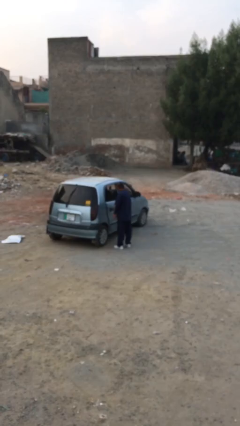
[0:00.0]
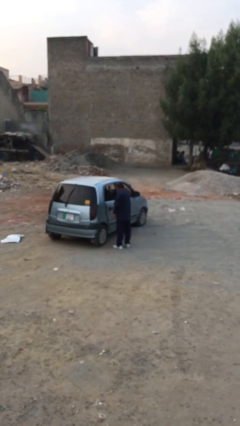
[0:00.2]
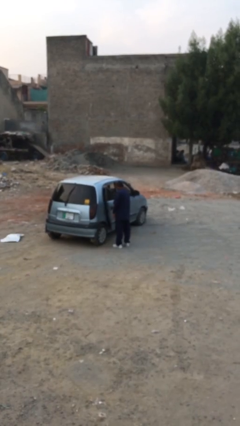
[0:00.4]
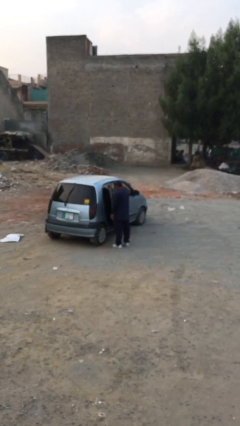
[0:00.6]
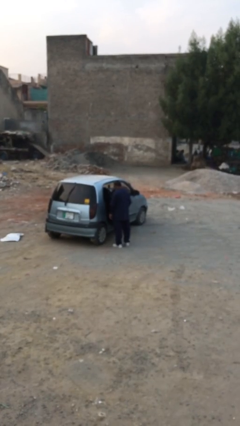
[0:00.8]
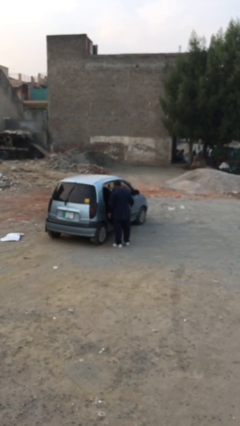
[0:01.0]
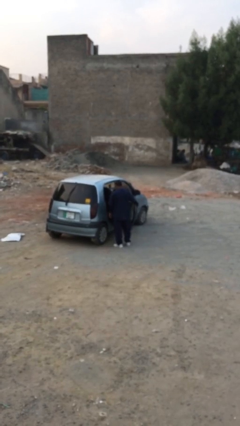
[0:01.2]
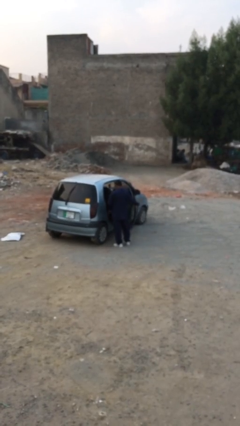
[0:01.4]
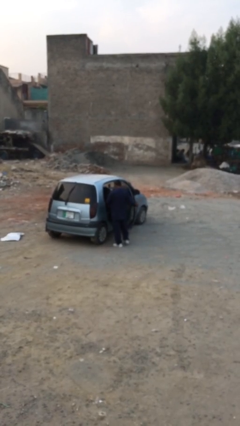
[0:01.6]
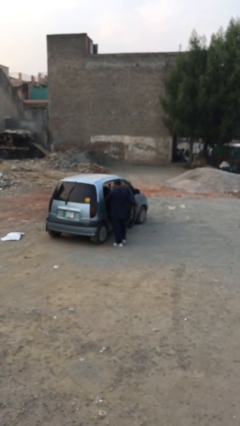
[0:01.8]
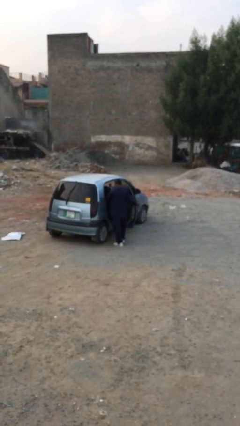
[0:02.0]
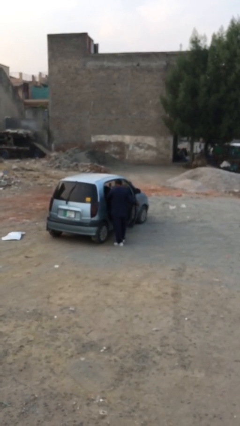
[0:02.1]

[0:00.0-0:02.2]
person opens car door

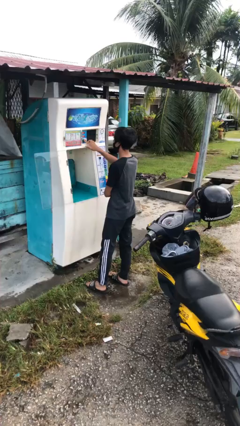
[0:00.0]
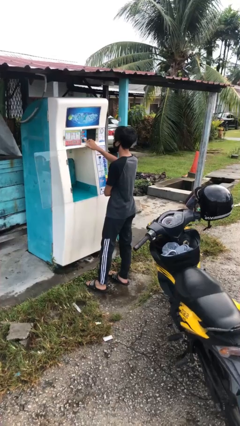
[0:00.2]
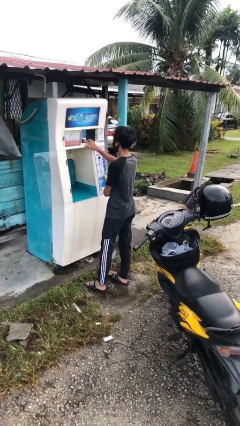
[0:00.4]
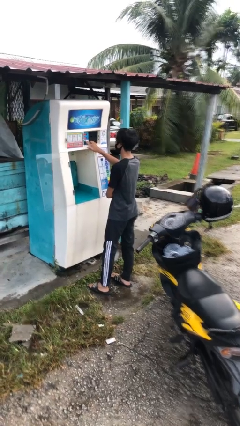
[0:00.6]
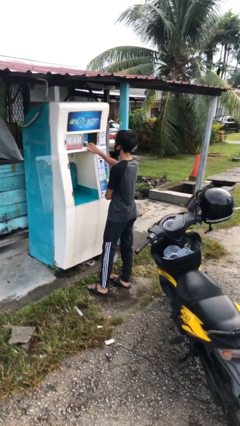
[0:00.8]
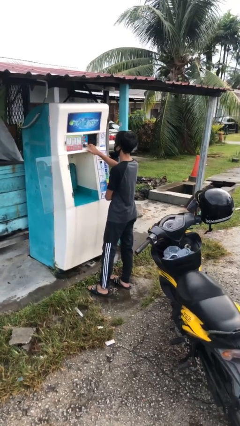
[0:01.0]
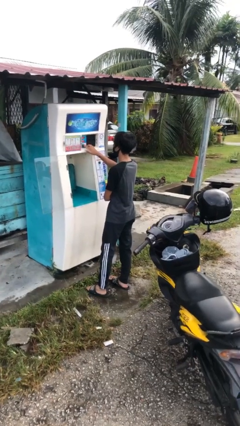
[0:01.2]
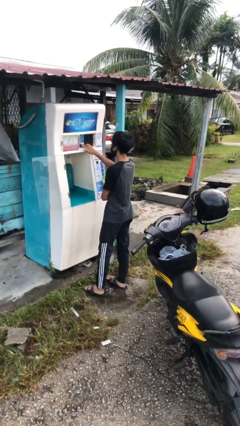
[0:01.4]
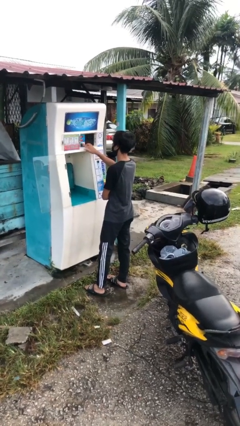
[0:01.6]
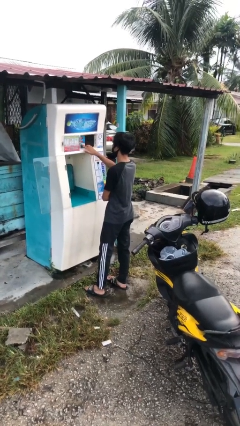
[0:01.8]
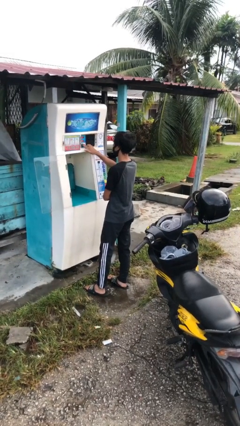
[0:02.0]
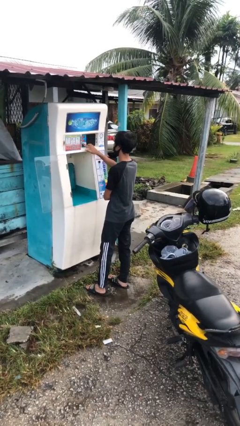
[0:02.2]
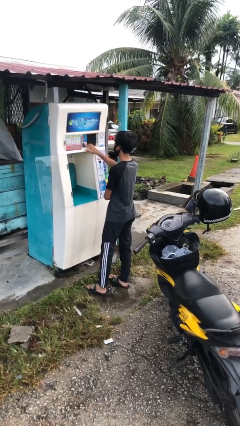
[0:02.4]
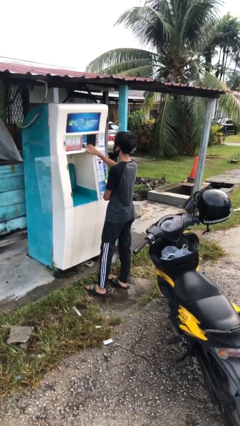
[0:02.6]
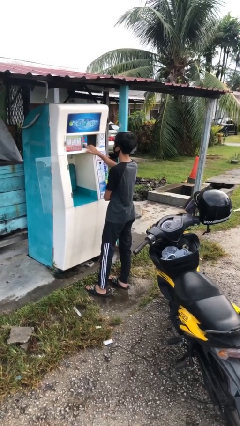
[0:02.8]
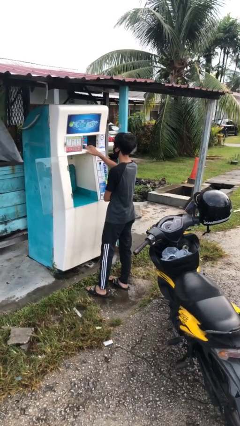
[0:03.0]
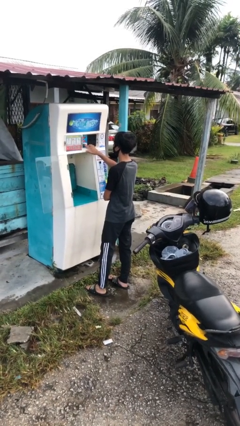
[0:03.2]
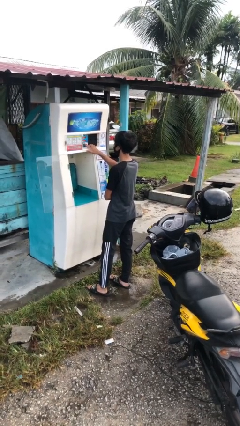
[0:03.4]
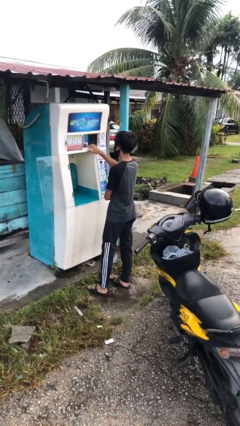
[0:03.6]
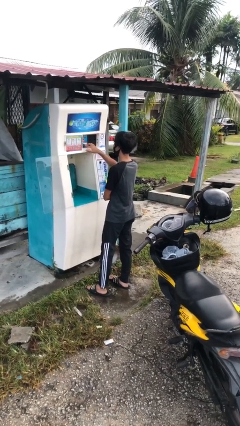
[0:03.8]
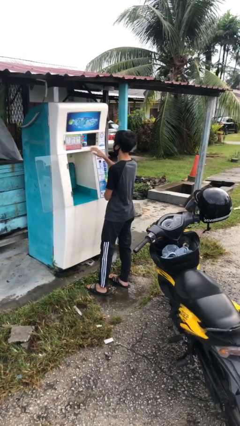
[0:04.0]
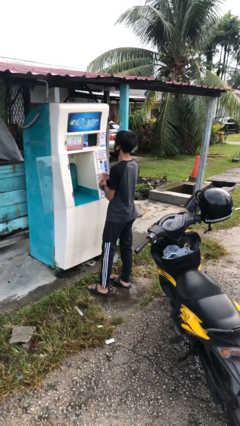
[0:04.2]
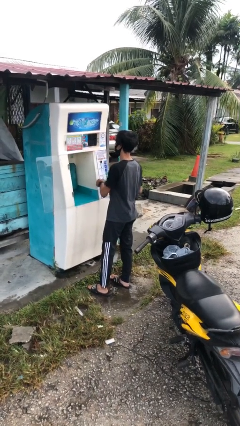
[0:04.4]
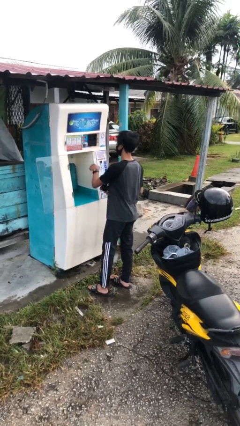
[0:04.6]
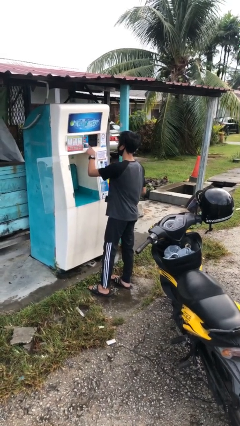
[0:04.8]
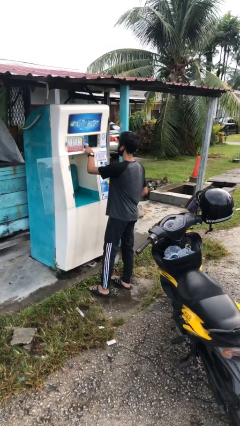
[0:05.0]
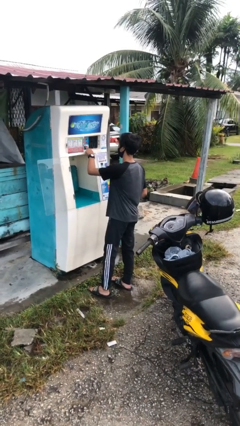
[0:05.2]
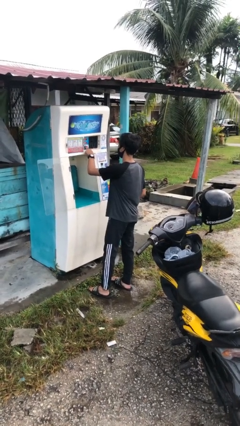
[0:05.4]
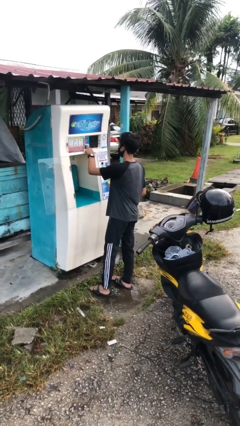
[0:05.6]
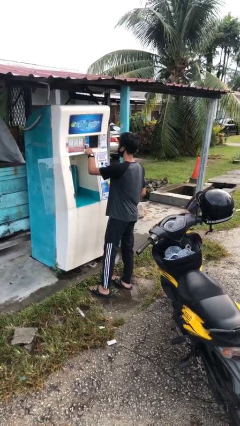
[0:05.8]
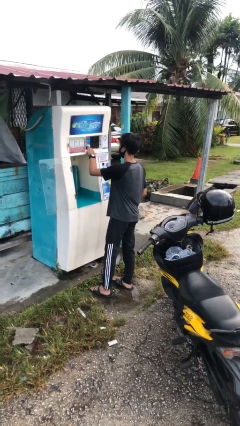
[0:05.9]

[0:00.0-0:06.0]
person purchases from machine

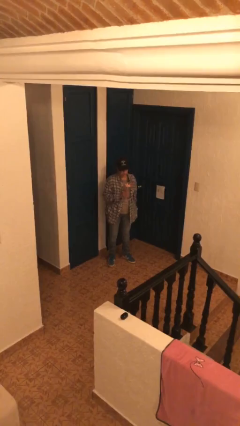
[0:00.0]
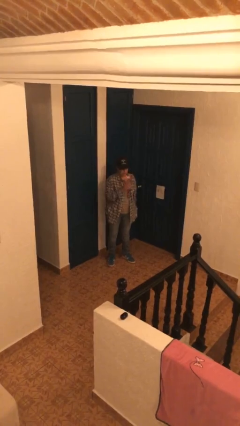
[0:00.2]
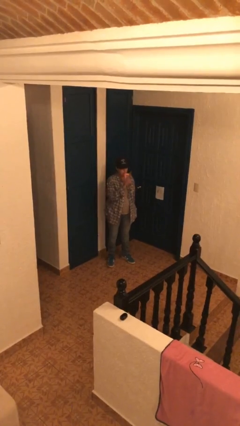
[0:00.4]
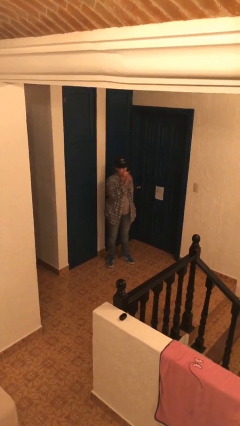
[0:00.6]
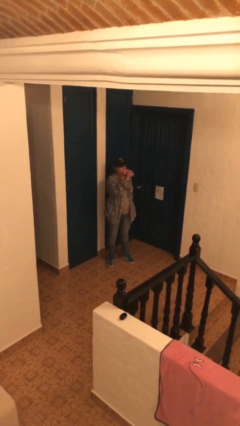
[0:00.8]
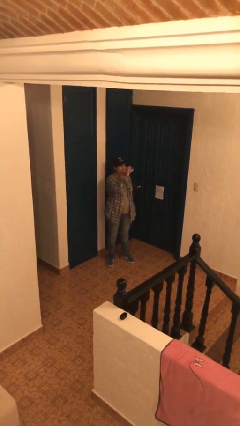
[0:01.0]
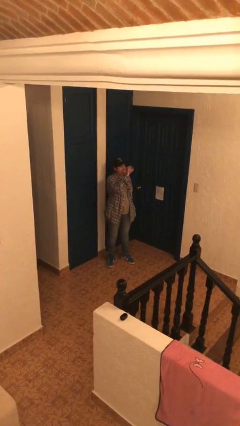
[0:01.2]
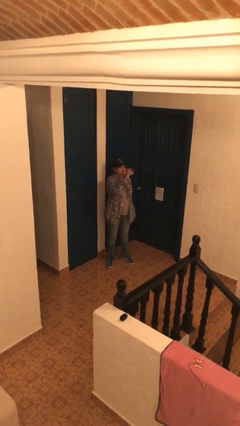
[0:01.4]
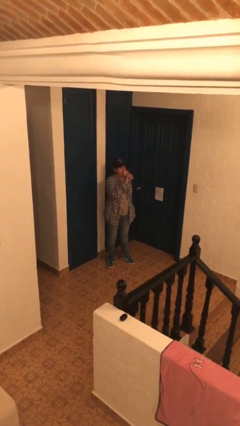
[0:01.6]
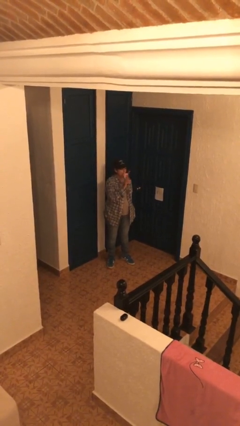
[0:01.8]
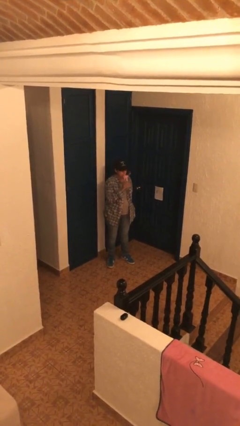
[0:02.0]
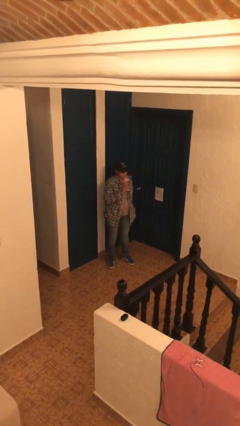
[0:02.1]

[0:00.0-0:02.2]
person drinks from bottle

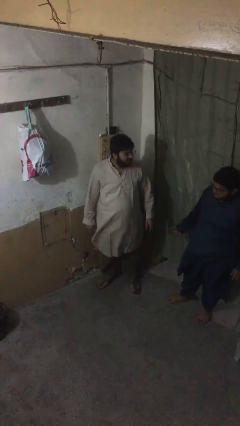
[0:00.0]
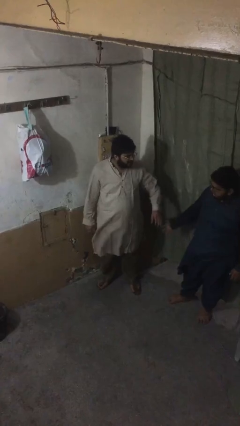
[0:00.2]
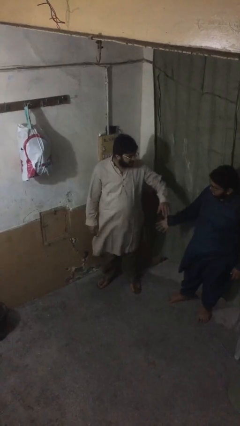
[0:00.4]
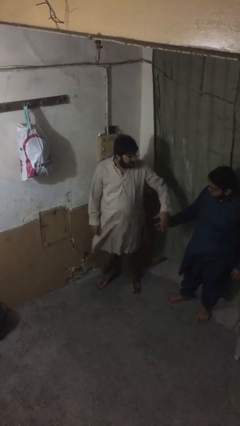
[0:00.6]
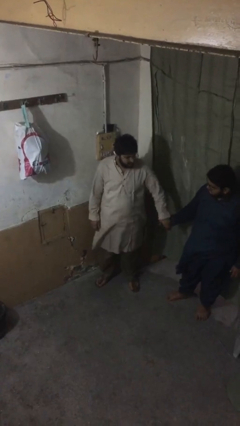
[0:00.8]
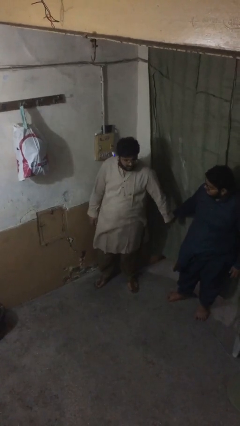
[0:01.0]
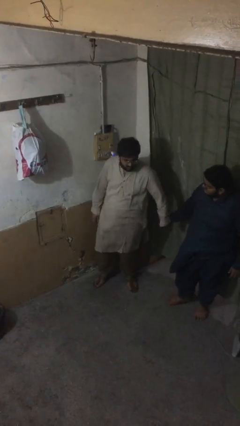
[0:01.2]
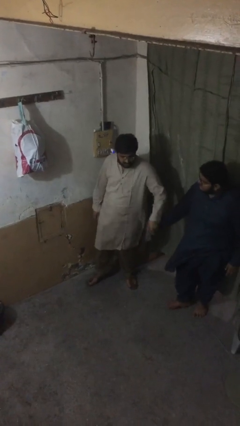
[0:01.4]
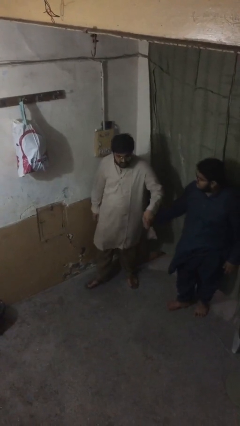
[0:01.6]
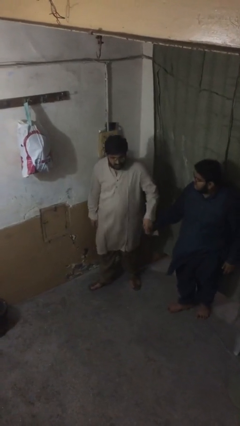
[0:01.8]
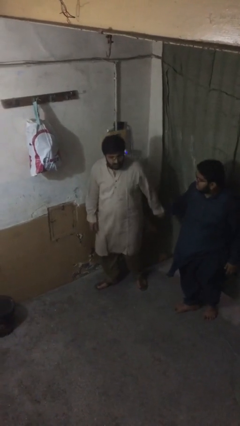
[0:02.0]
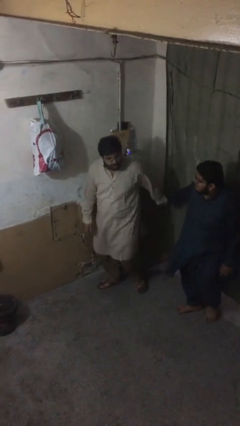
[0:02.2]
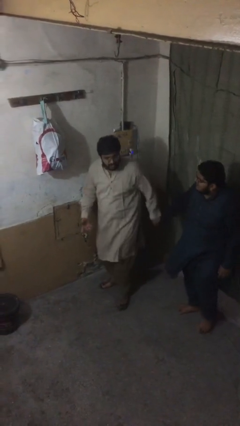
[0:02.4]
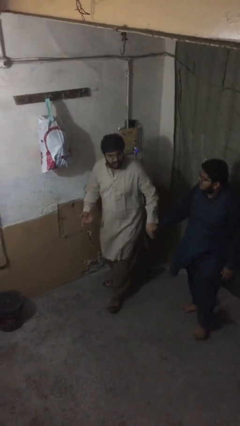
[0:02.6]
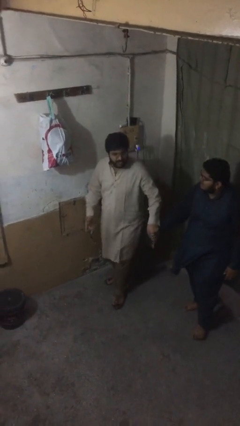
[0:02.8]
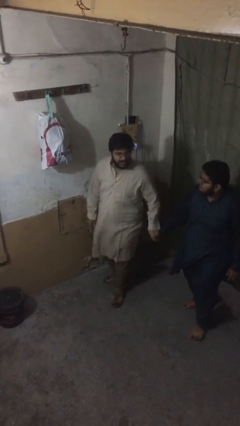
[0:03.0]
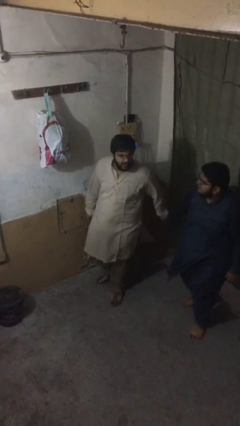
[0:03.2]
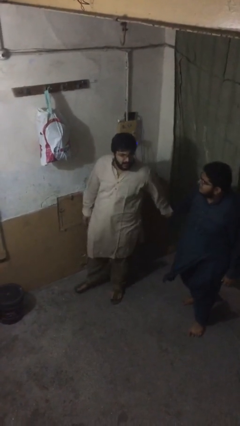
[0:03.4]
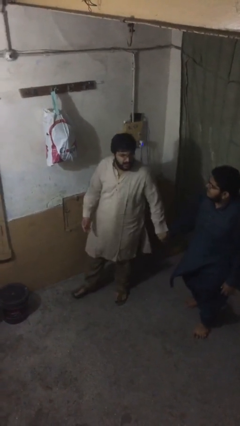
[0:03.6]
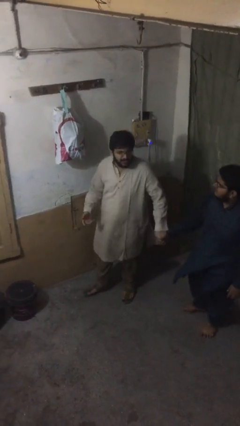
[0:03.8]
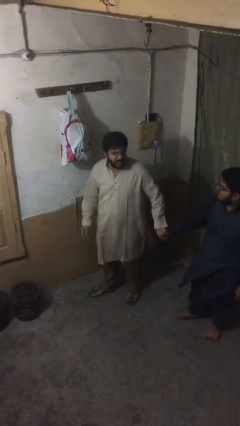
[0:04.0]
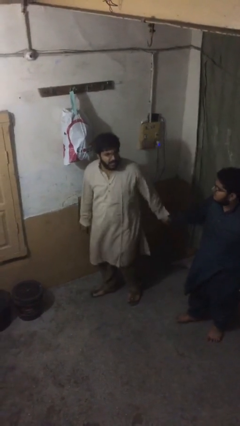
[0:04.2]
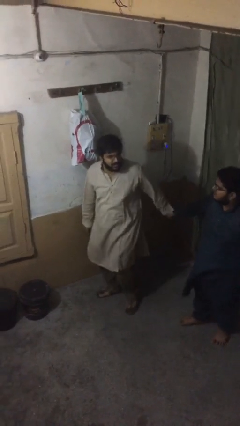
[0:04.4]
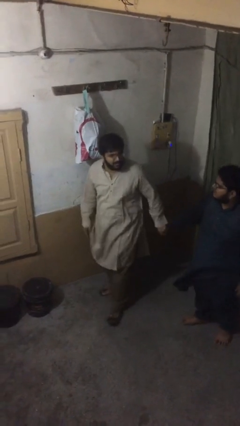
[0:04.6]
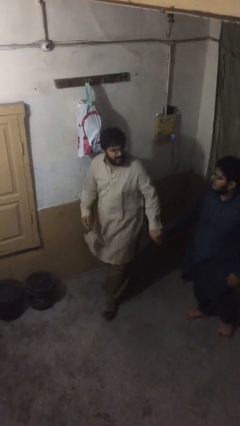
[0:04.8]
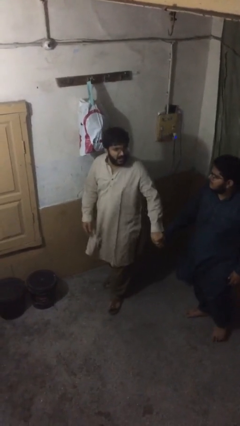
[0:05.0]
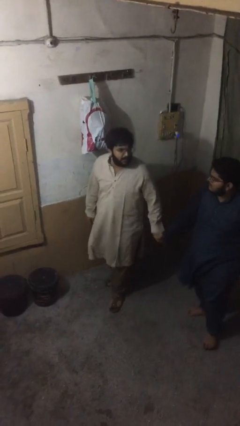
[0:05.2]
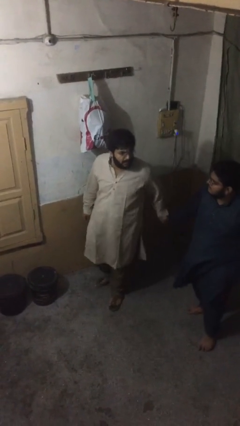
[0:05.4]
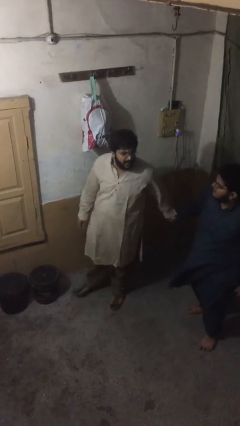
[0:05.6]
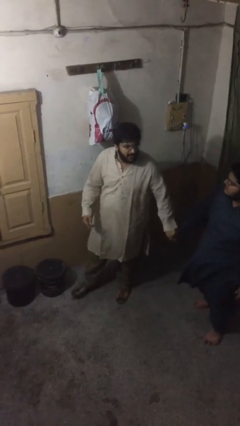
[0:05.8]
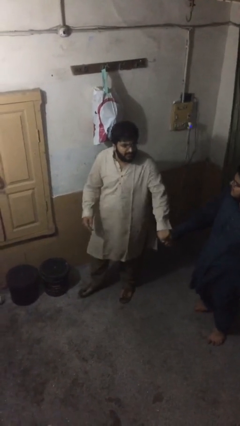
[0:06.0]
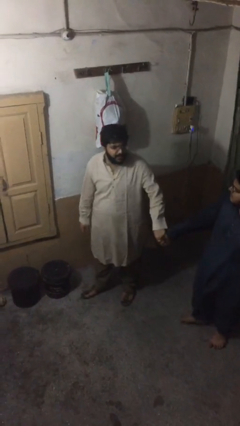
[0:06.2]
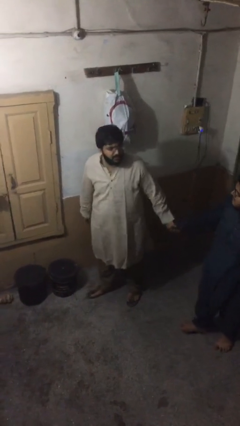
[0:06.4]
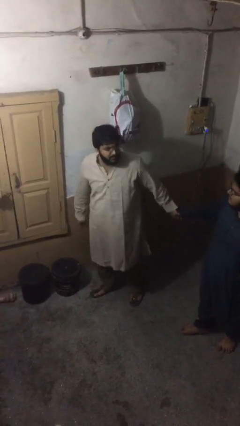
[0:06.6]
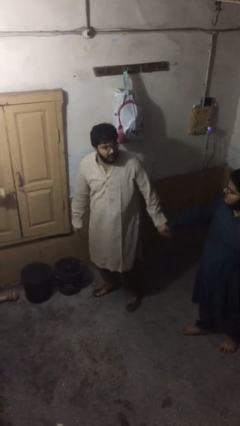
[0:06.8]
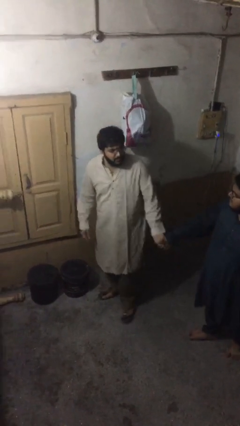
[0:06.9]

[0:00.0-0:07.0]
person holds hand
